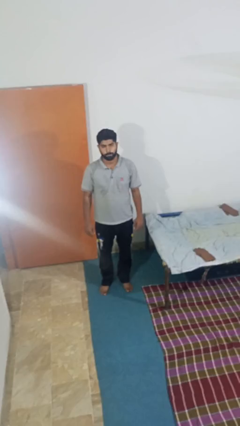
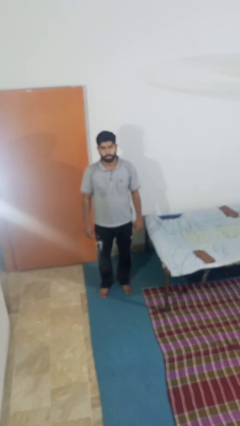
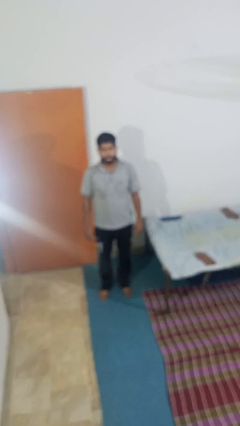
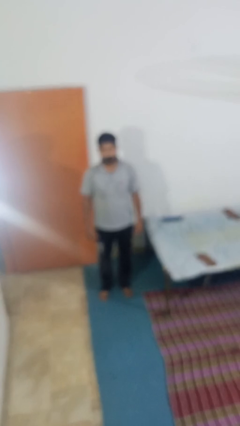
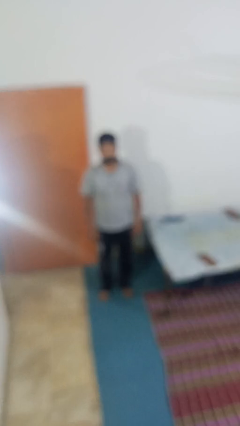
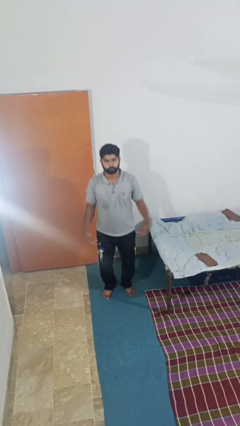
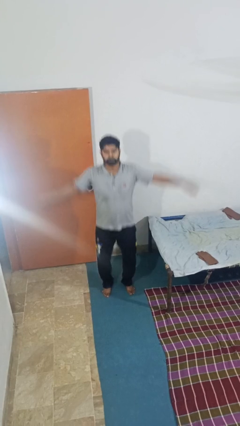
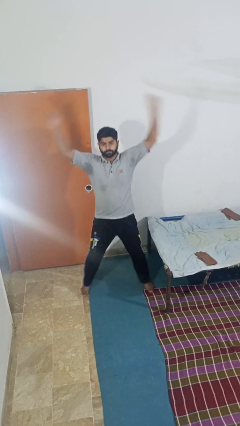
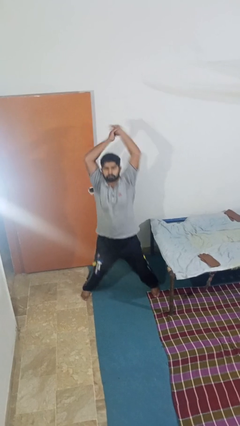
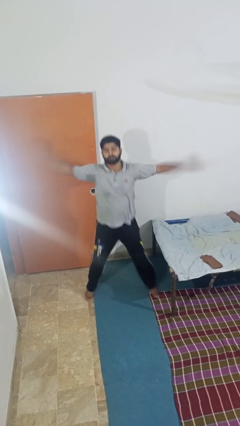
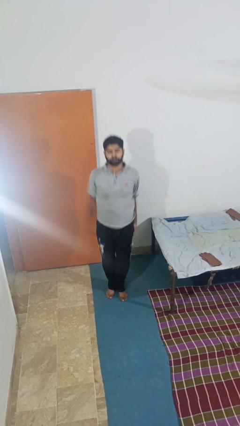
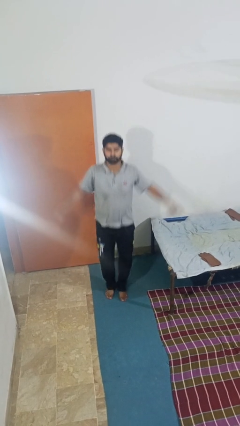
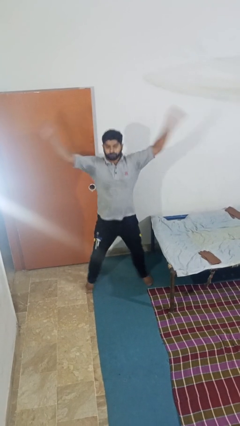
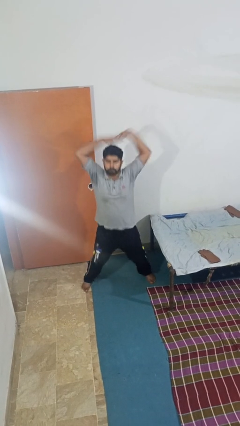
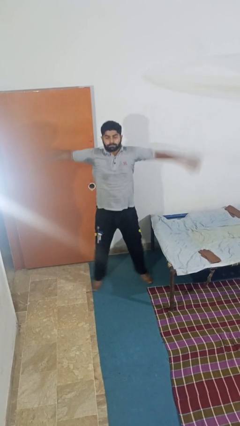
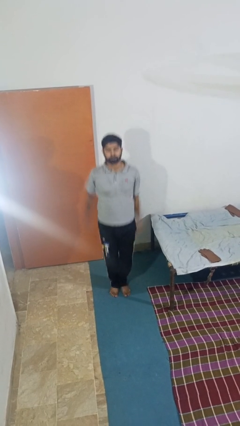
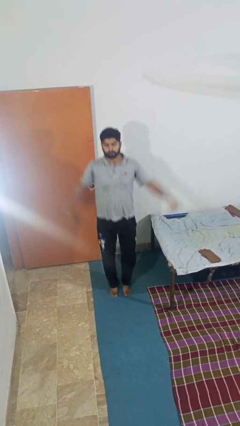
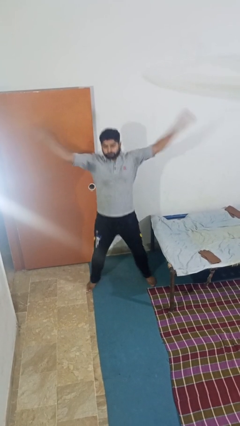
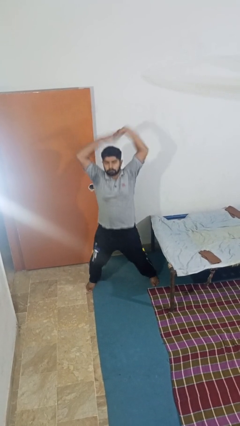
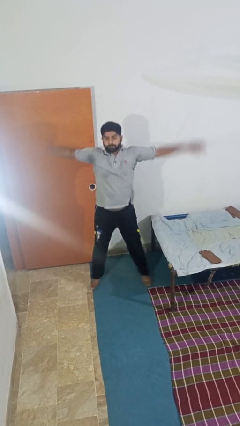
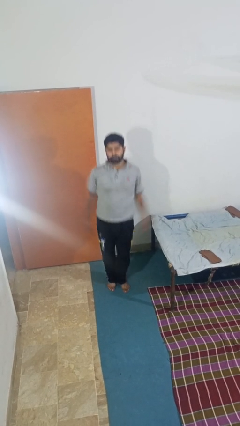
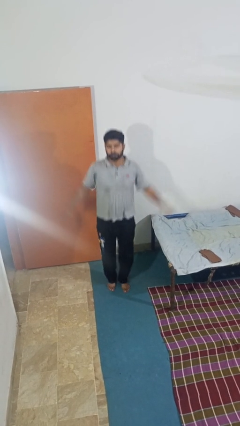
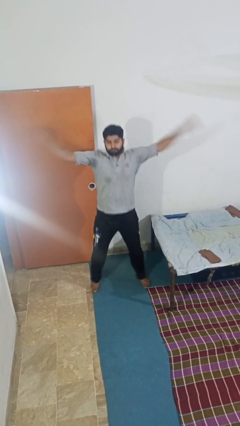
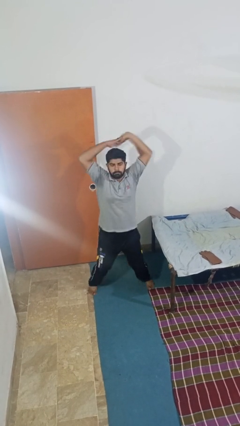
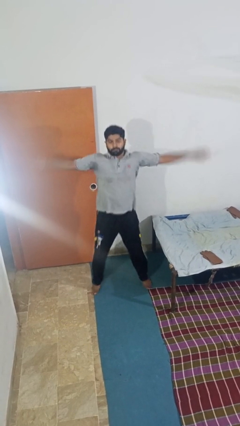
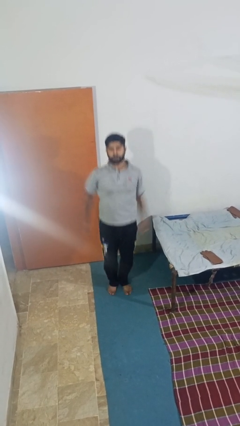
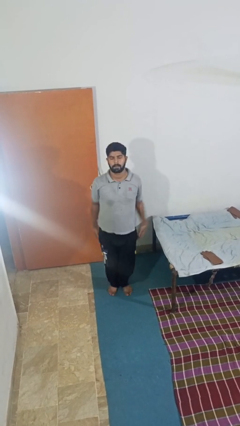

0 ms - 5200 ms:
person exercises with jumping jacks

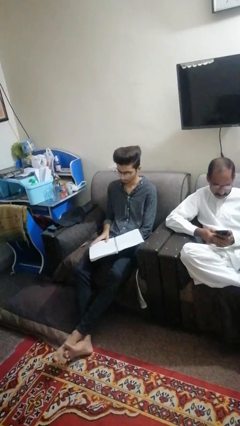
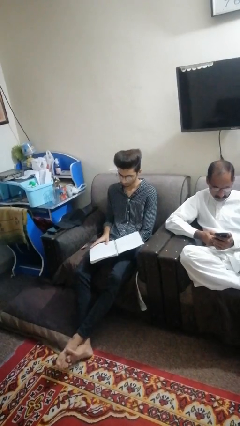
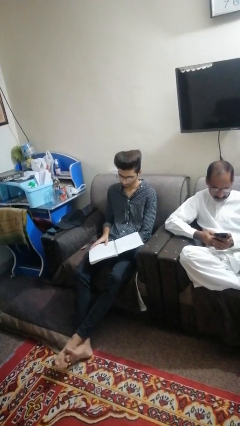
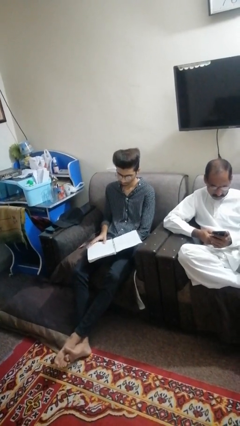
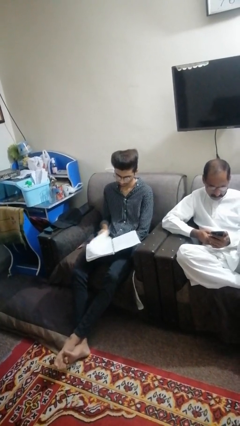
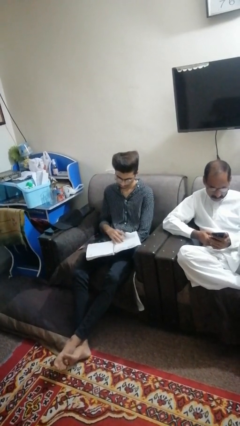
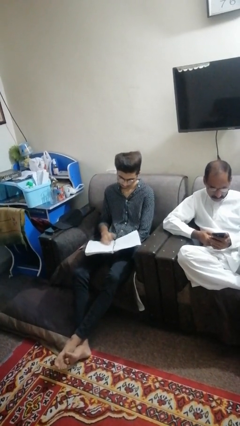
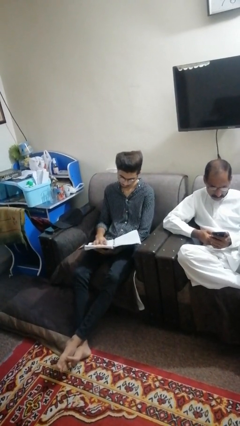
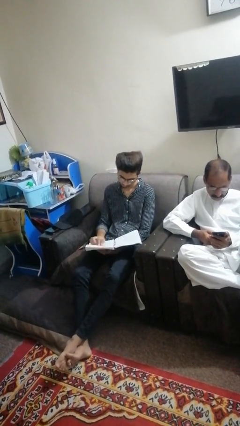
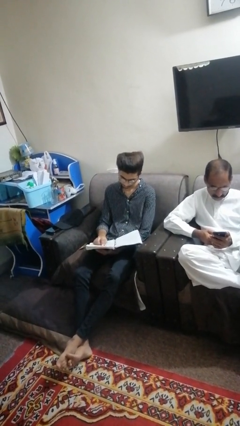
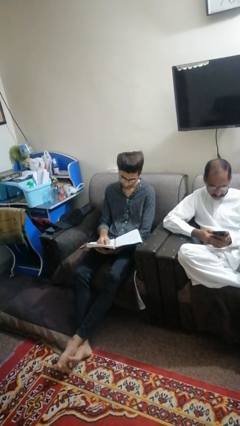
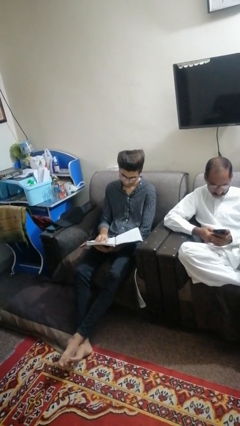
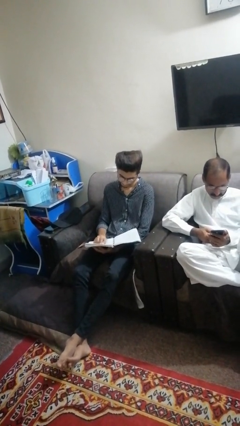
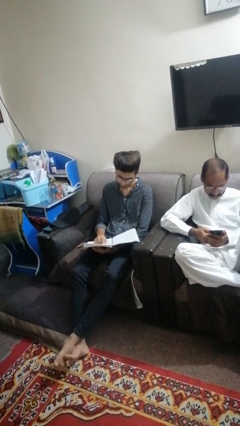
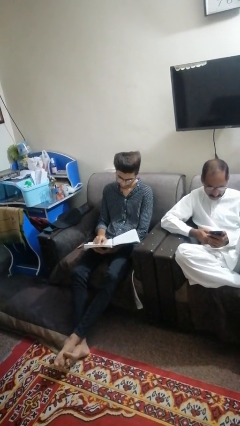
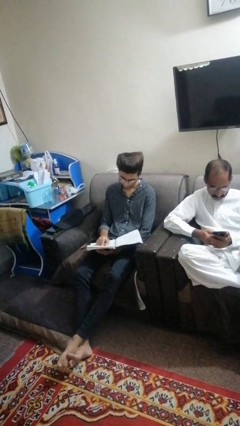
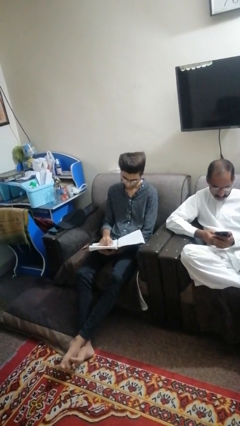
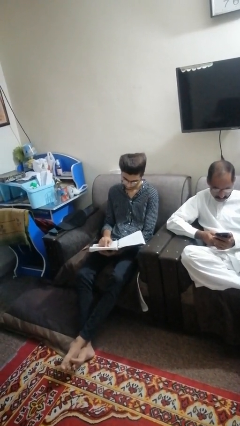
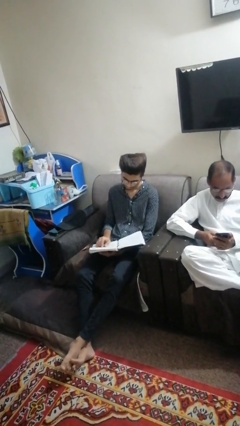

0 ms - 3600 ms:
person reads magazine

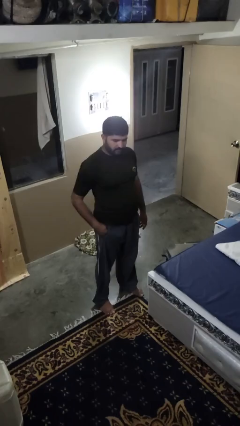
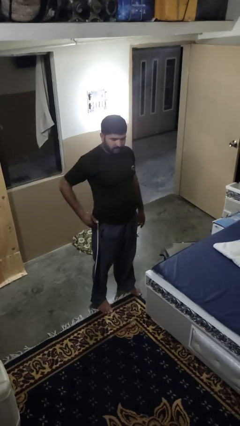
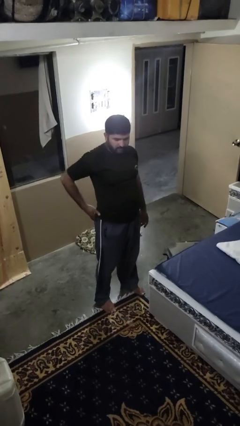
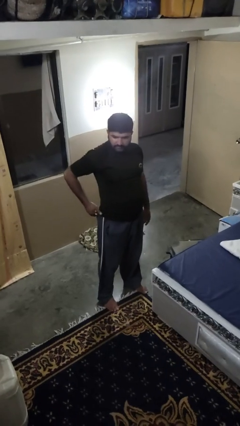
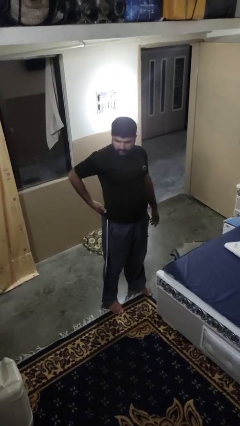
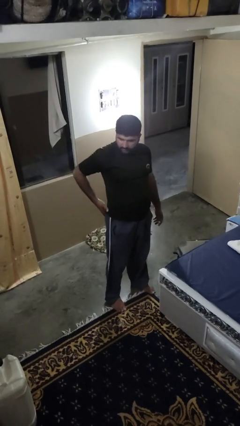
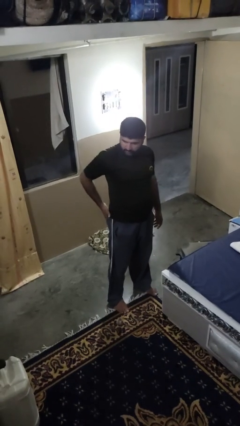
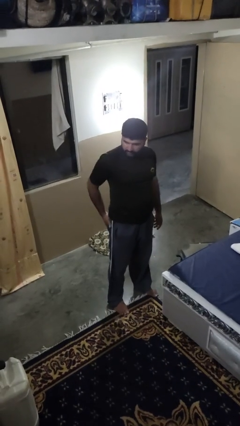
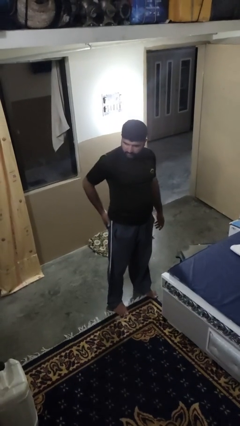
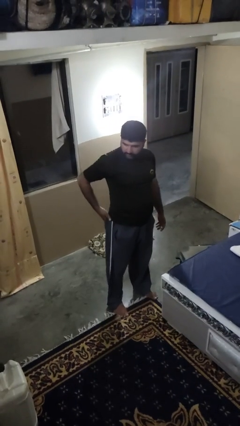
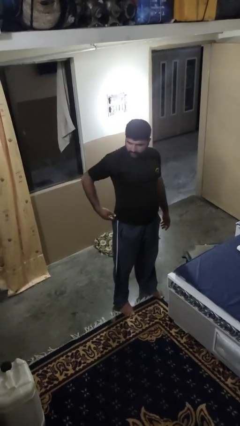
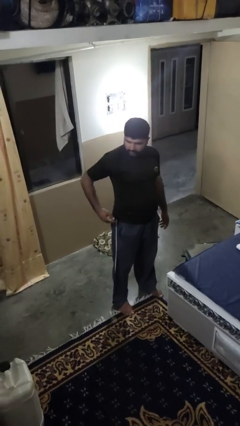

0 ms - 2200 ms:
person puts hands in back pockets

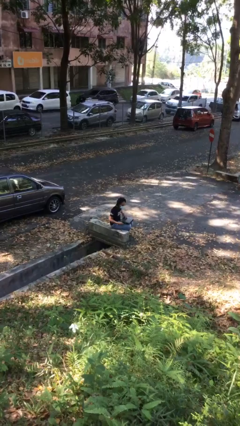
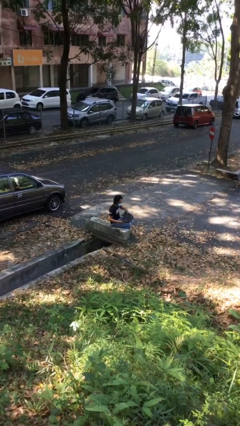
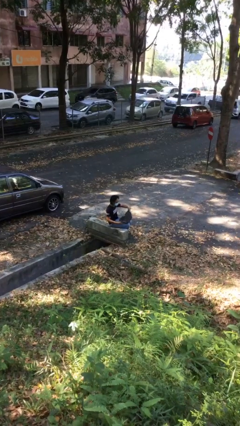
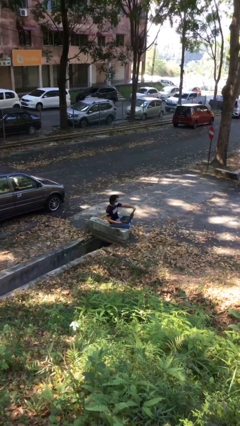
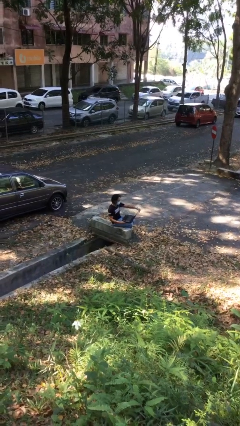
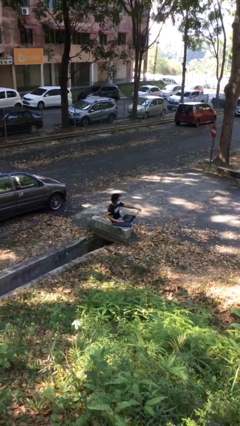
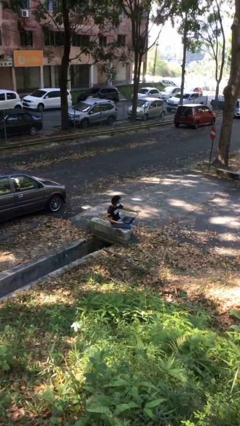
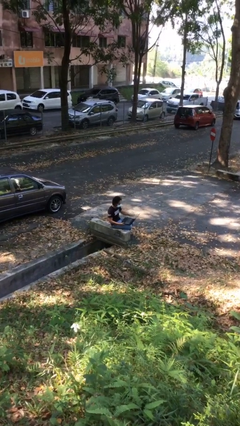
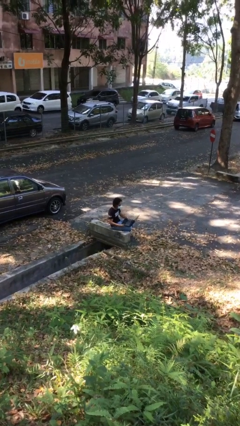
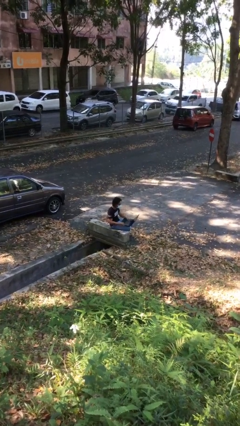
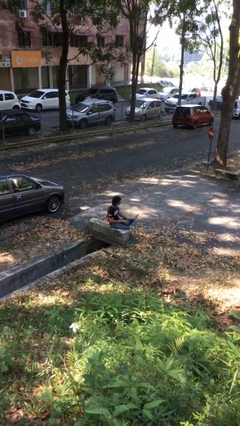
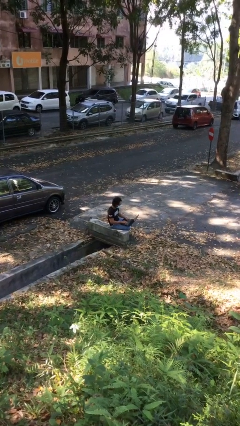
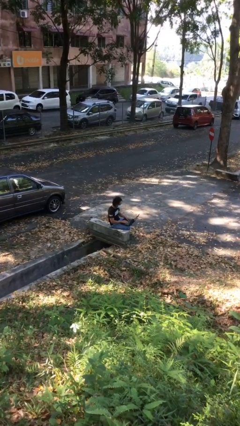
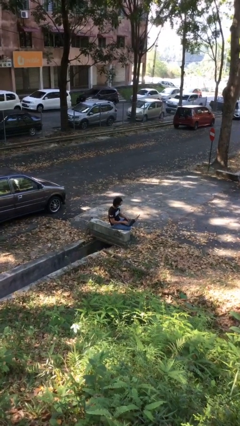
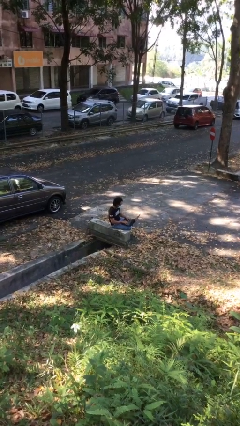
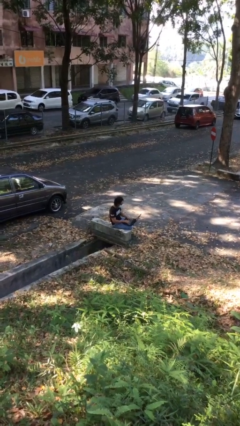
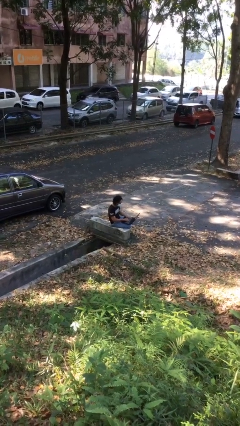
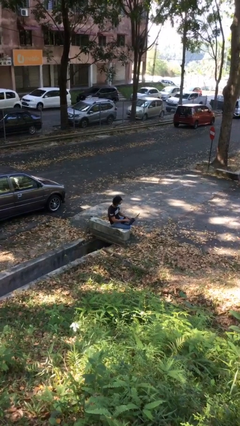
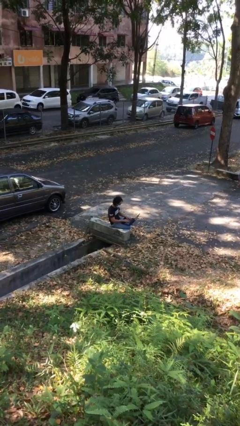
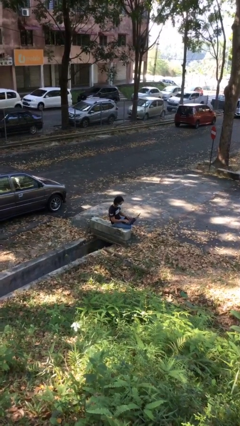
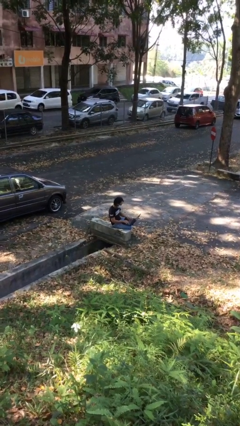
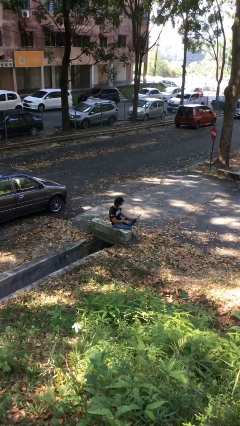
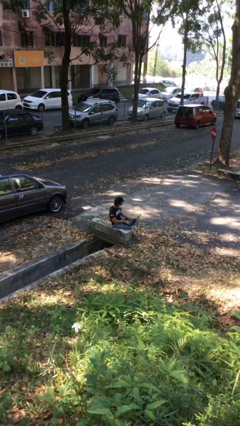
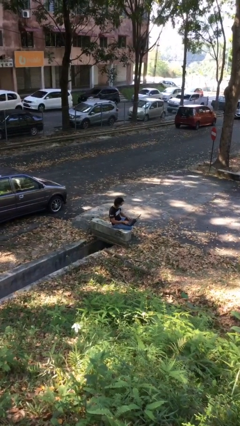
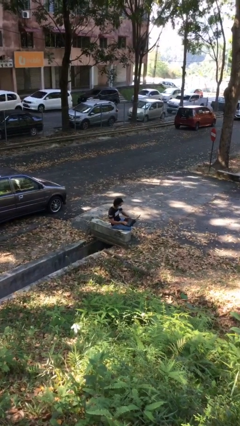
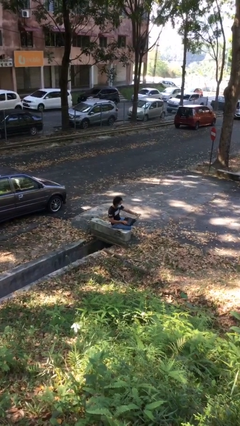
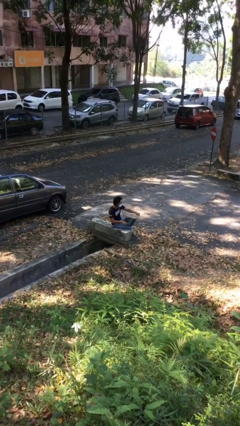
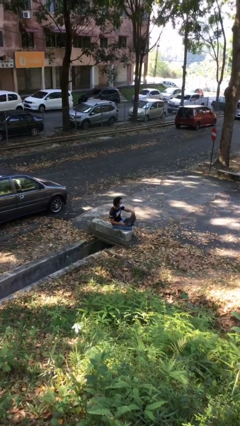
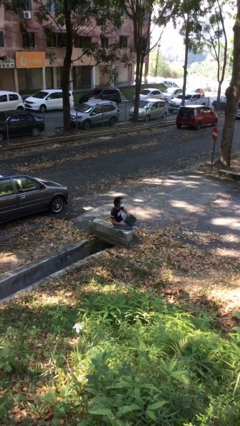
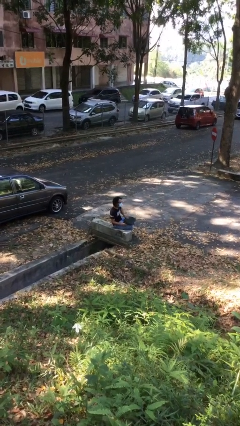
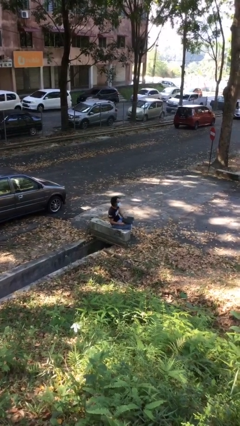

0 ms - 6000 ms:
person interacts with laptop

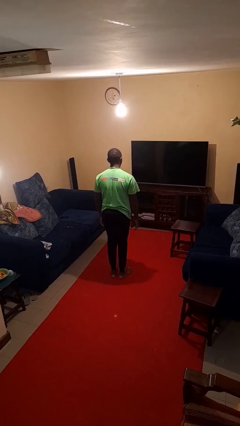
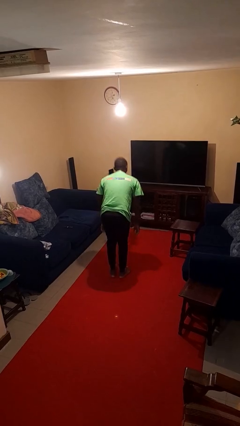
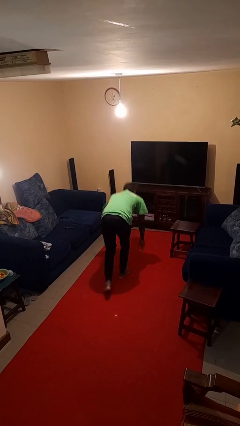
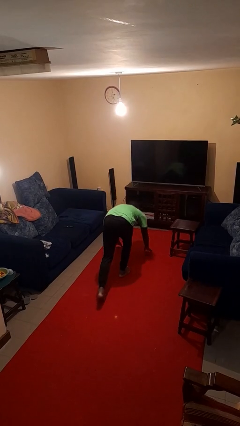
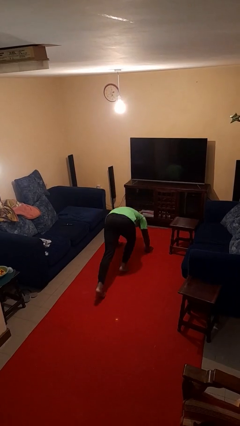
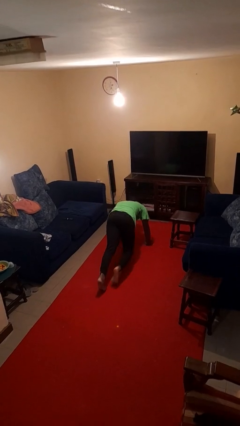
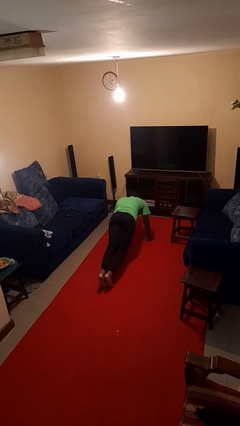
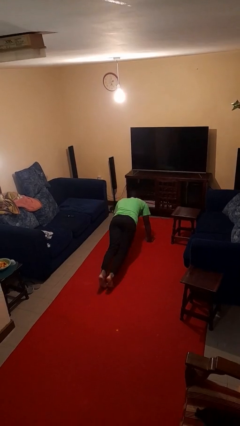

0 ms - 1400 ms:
person exercises with plank
